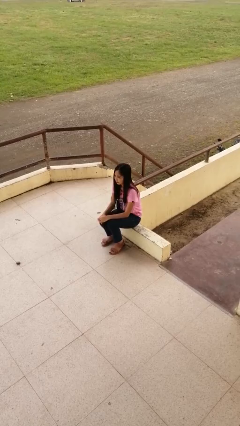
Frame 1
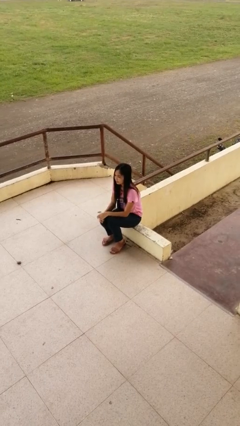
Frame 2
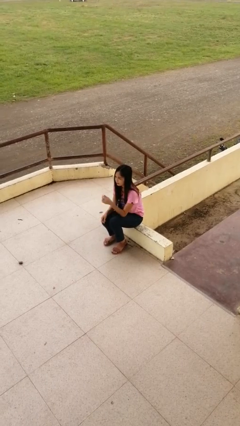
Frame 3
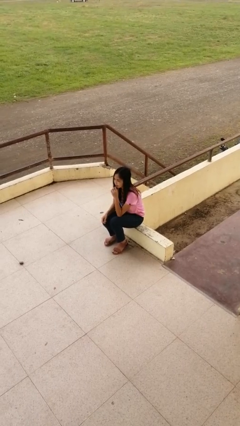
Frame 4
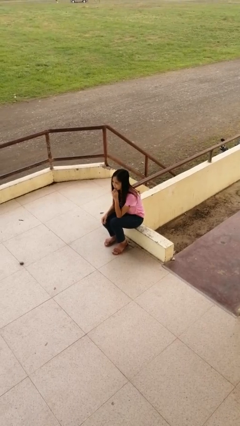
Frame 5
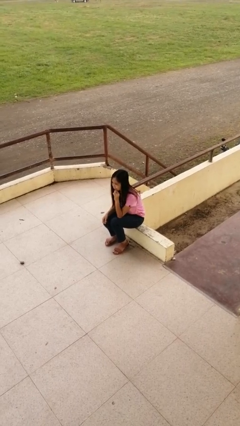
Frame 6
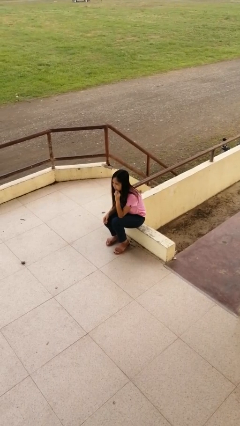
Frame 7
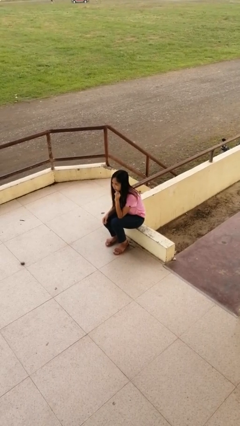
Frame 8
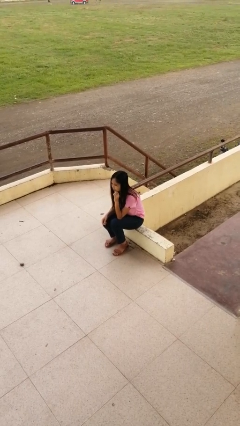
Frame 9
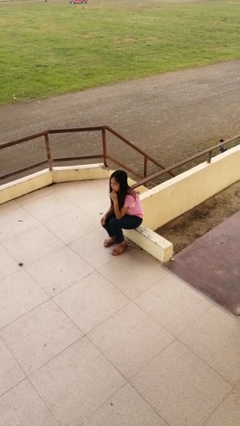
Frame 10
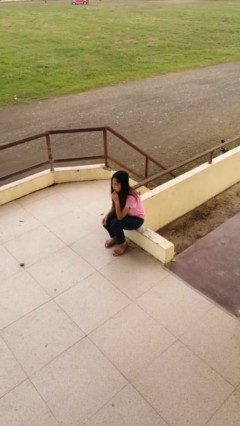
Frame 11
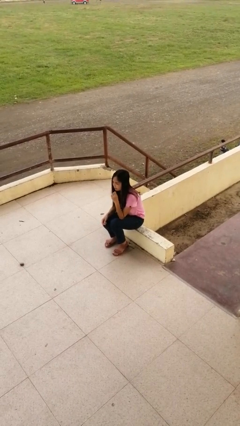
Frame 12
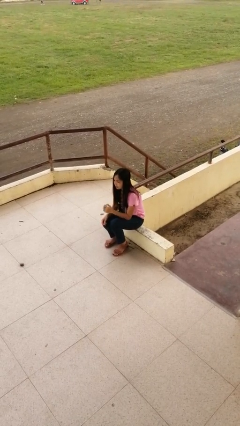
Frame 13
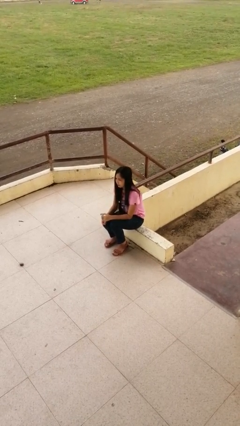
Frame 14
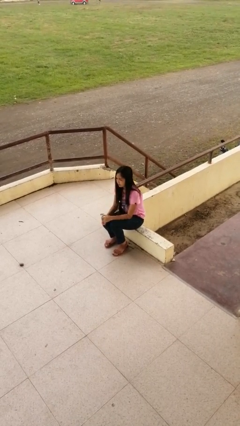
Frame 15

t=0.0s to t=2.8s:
person strokes chin

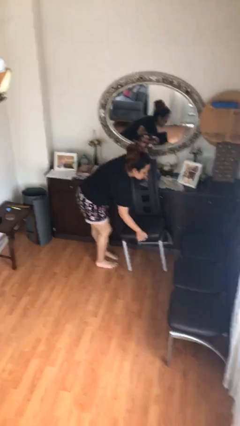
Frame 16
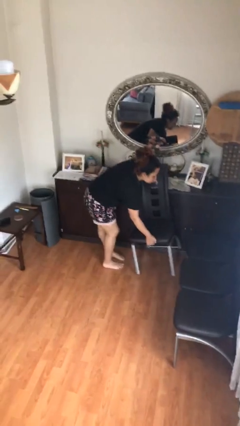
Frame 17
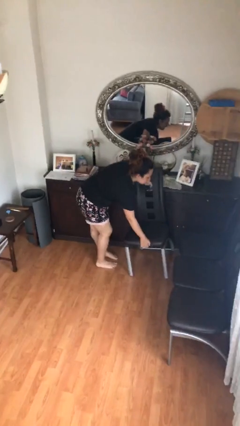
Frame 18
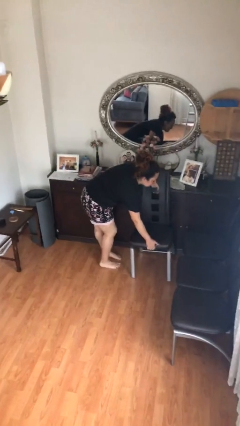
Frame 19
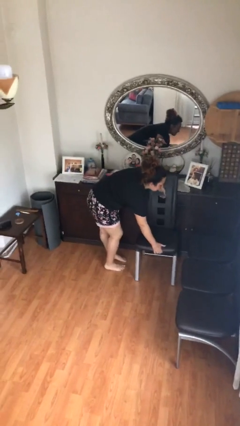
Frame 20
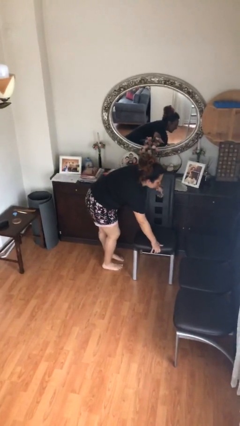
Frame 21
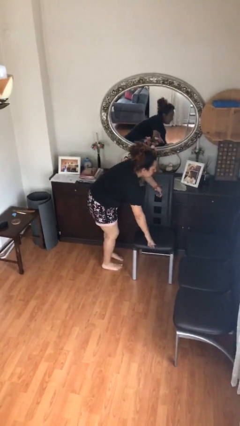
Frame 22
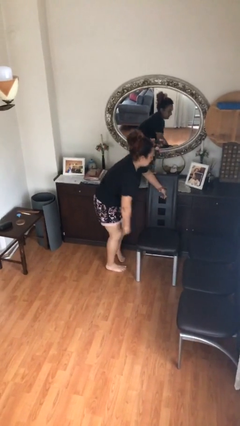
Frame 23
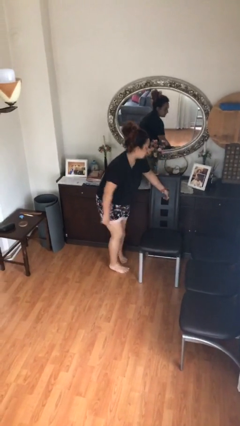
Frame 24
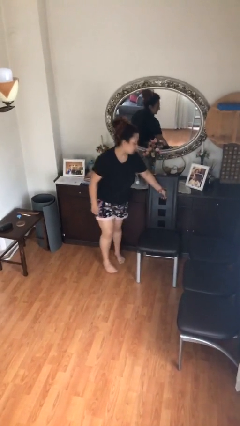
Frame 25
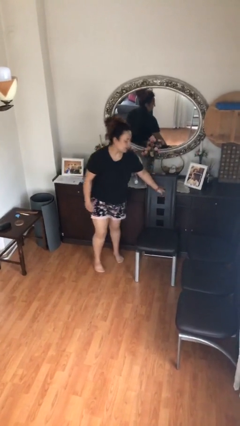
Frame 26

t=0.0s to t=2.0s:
person puts down object on floor

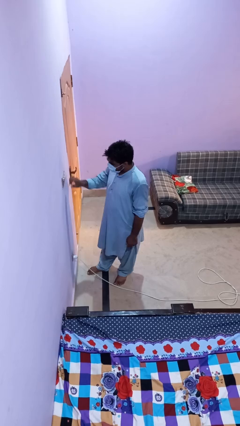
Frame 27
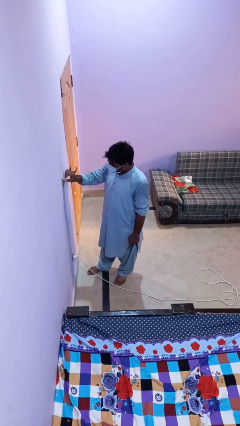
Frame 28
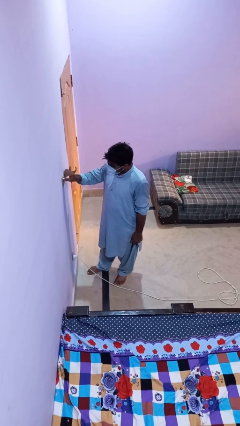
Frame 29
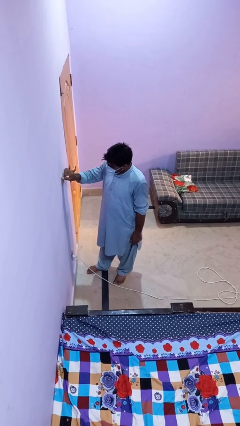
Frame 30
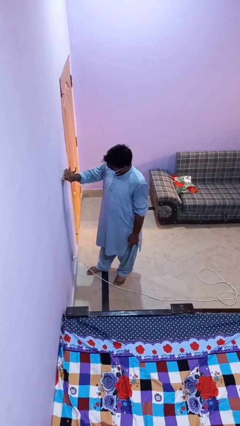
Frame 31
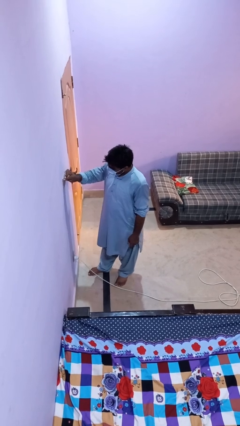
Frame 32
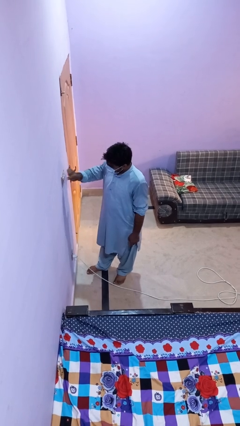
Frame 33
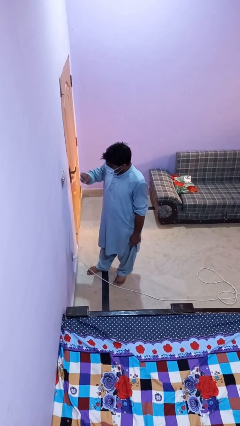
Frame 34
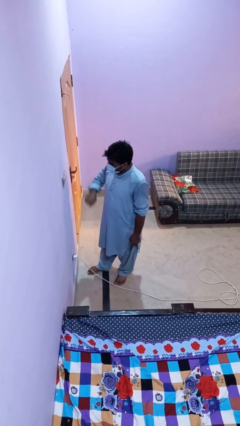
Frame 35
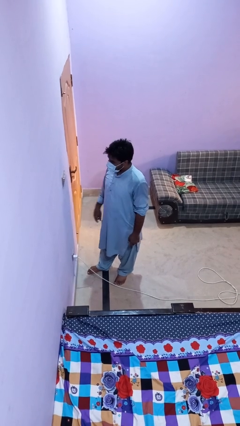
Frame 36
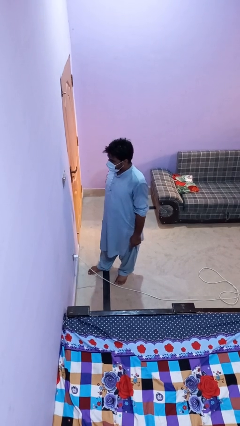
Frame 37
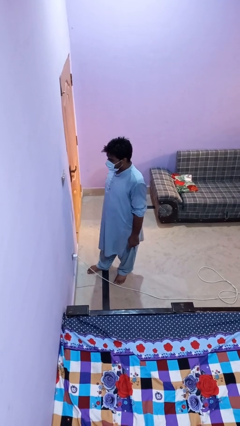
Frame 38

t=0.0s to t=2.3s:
person adjusts thermostat

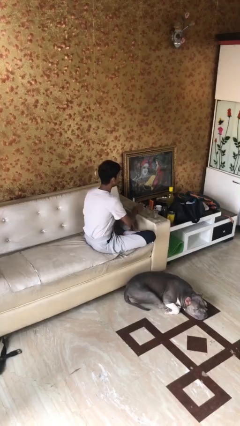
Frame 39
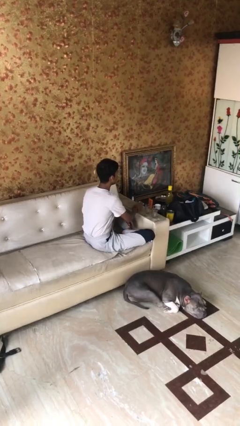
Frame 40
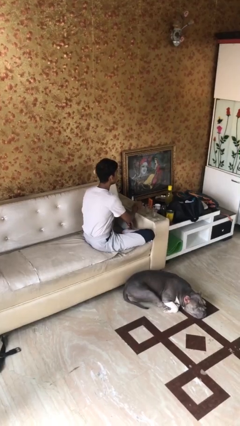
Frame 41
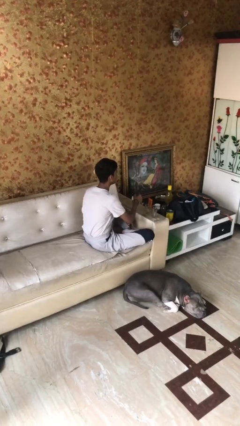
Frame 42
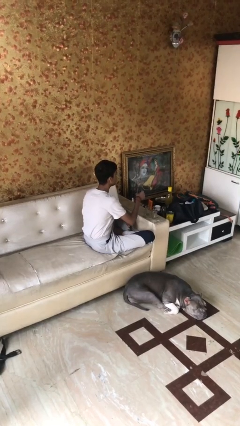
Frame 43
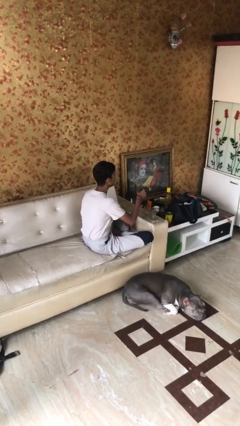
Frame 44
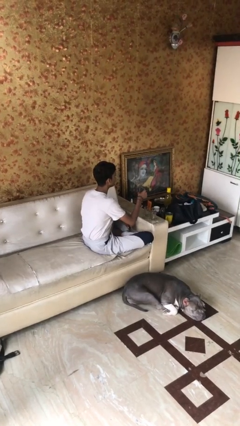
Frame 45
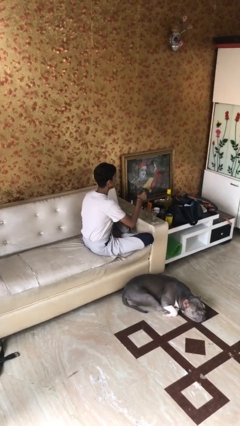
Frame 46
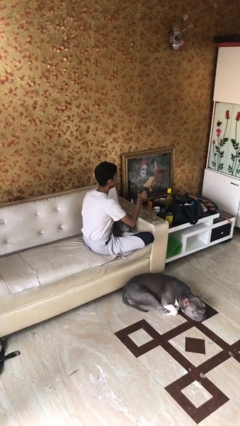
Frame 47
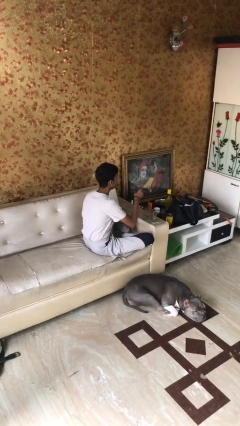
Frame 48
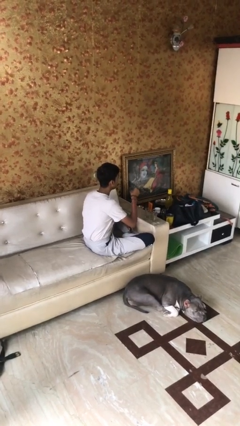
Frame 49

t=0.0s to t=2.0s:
person picks up object from table

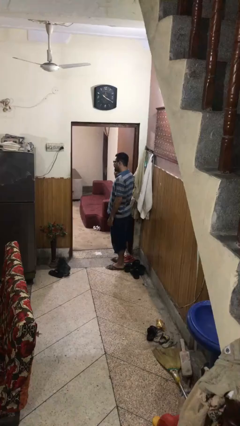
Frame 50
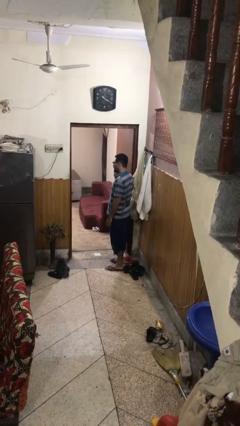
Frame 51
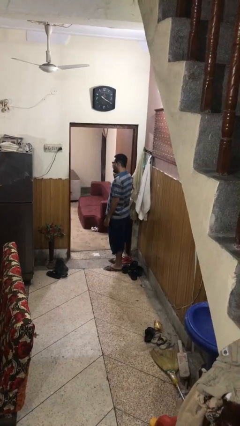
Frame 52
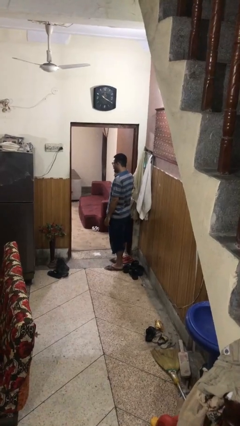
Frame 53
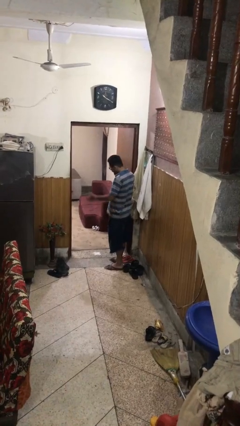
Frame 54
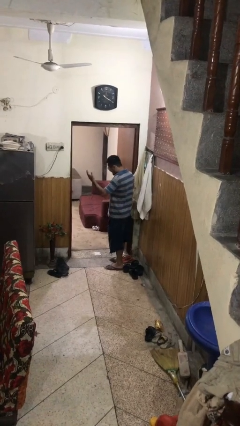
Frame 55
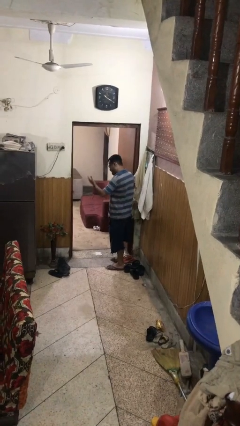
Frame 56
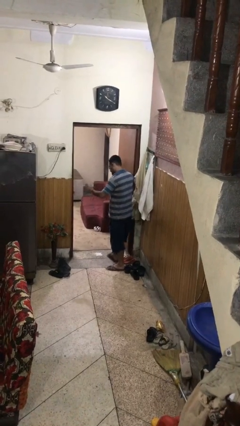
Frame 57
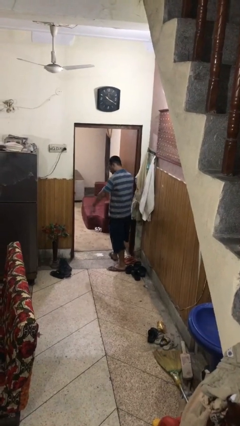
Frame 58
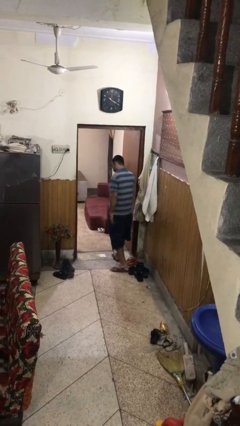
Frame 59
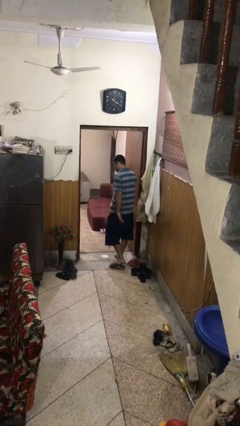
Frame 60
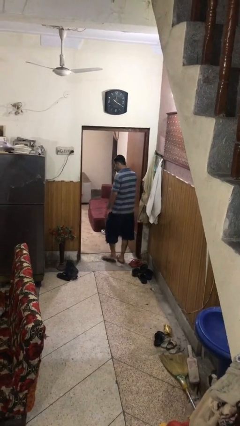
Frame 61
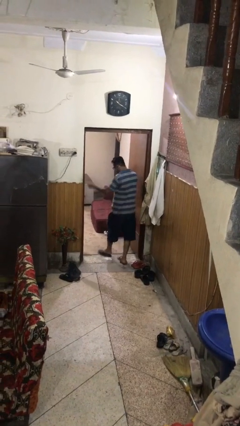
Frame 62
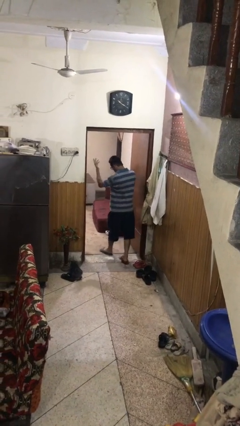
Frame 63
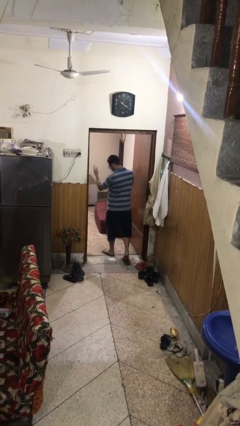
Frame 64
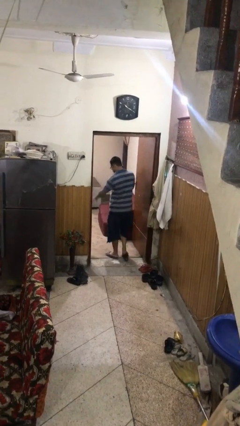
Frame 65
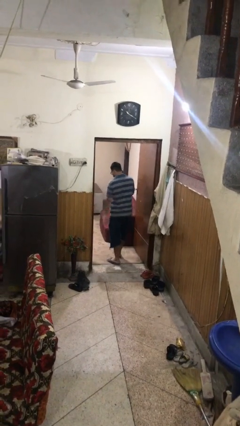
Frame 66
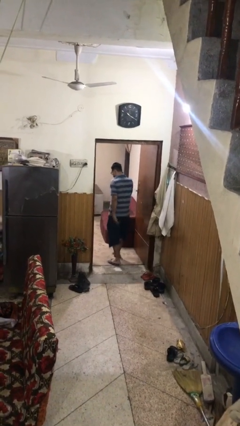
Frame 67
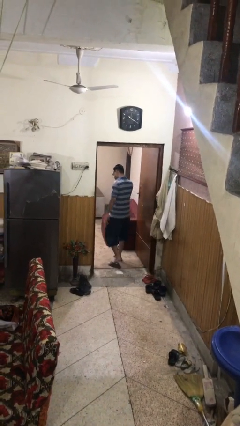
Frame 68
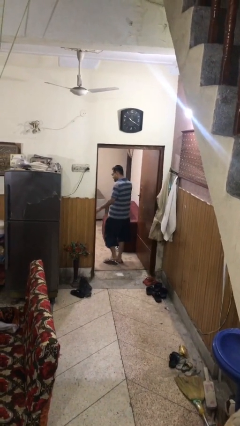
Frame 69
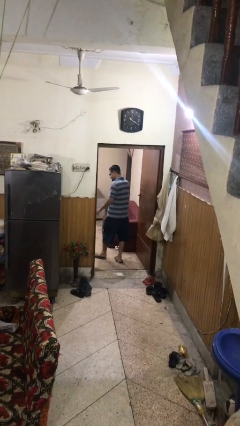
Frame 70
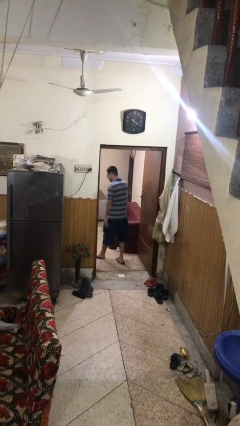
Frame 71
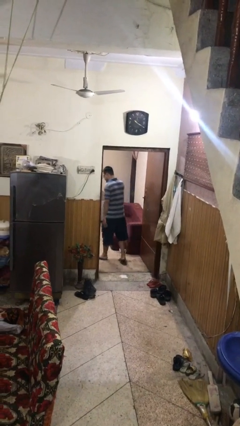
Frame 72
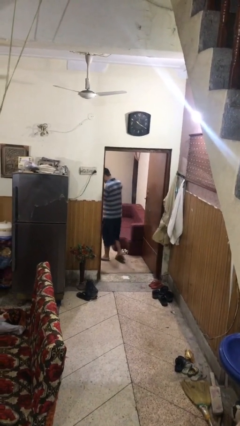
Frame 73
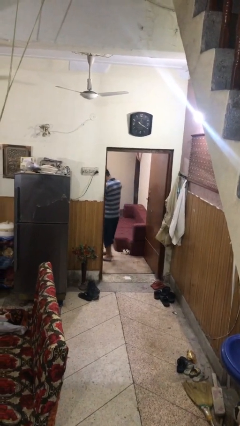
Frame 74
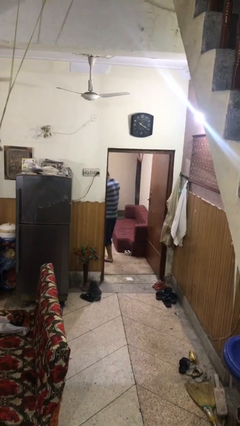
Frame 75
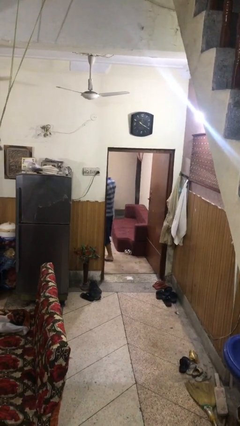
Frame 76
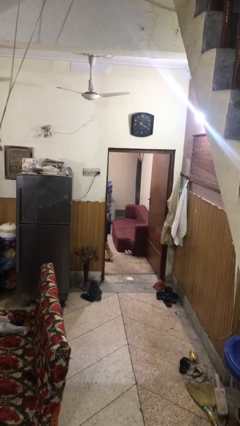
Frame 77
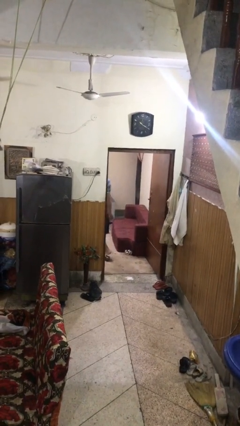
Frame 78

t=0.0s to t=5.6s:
person exits scene through structure

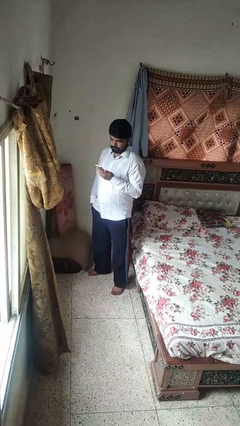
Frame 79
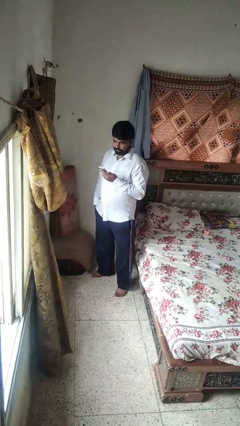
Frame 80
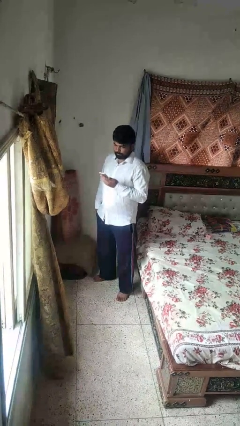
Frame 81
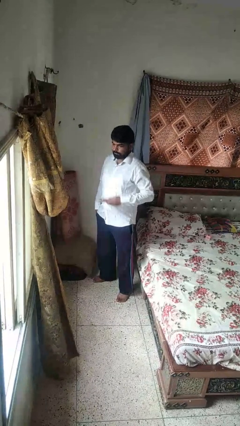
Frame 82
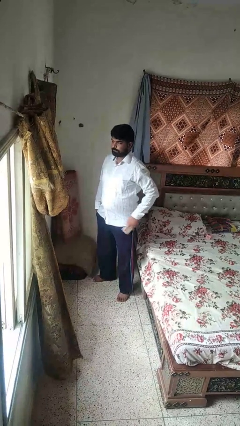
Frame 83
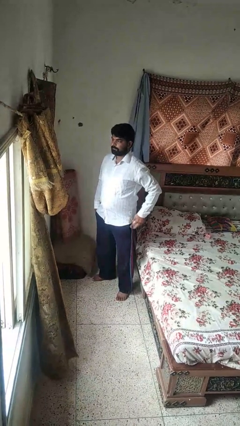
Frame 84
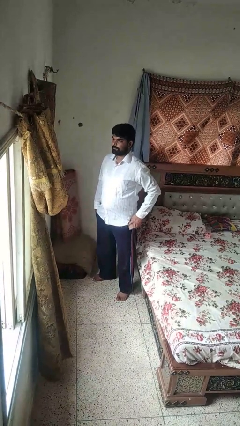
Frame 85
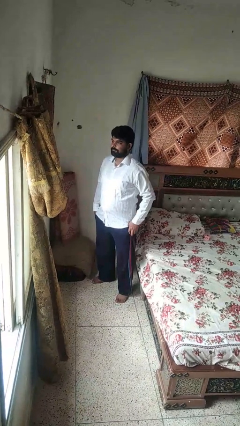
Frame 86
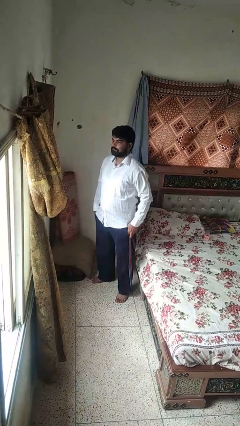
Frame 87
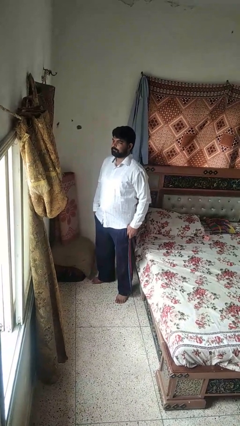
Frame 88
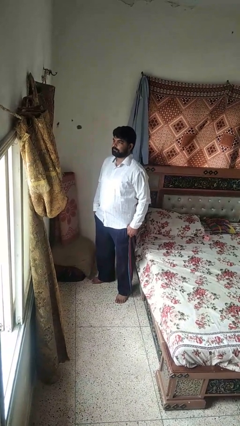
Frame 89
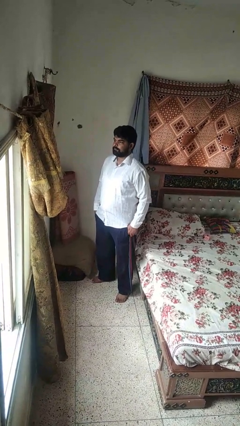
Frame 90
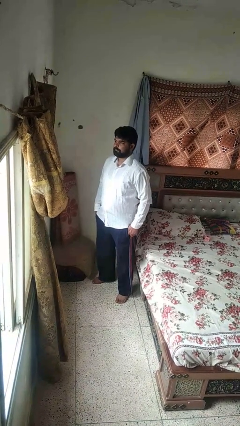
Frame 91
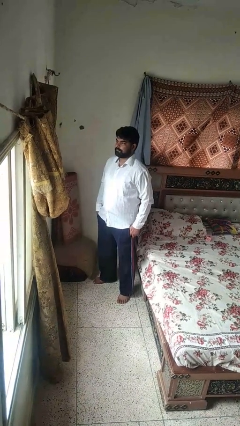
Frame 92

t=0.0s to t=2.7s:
person puts phone into pocket

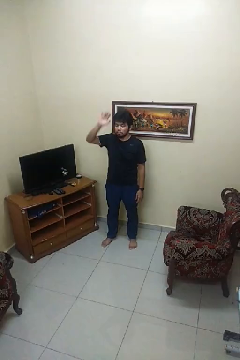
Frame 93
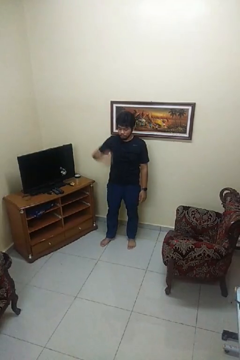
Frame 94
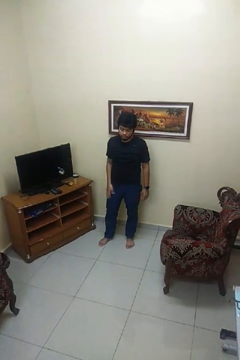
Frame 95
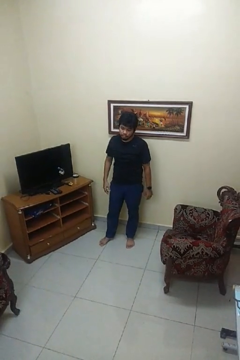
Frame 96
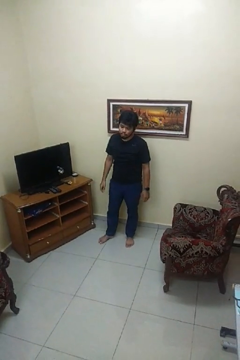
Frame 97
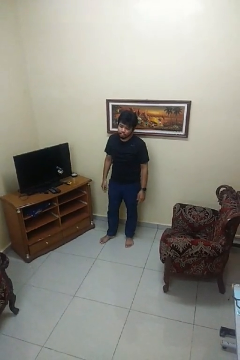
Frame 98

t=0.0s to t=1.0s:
person gestures lower hand
